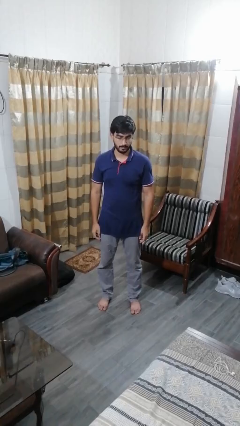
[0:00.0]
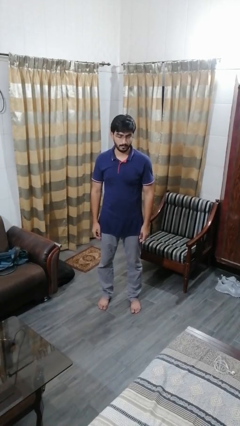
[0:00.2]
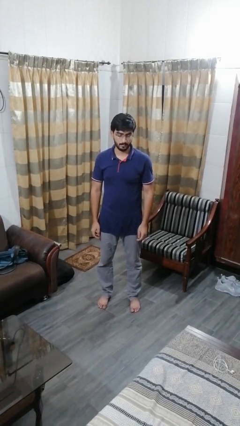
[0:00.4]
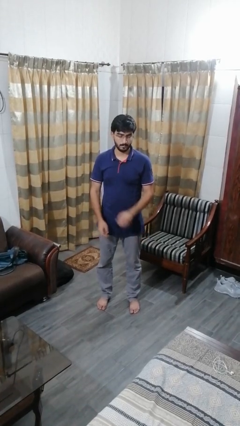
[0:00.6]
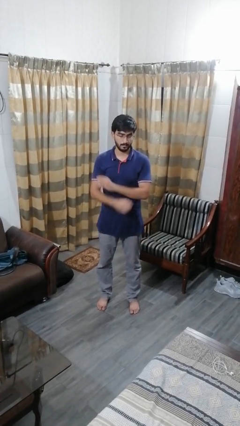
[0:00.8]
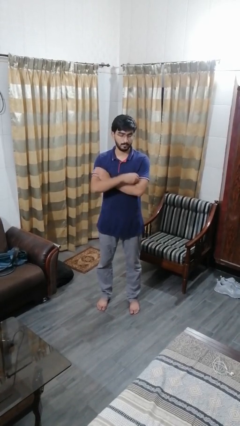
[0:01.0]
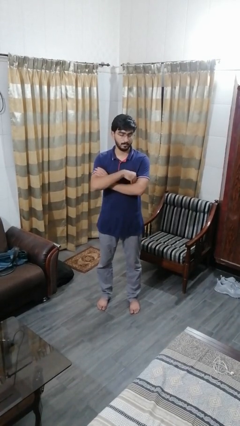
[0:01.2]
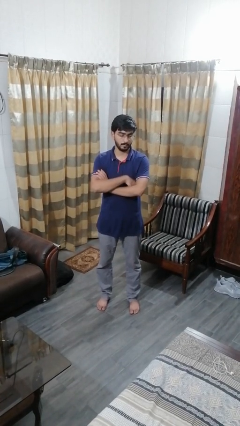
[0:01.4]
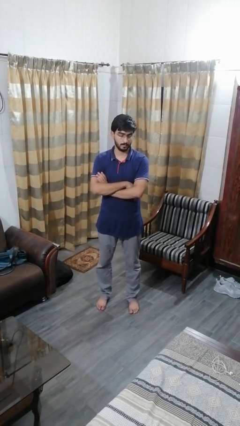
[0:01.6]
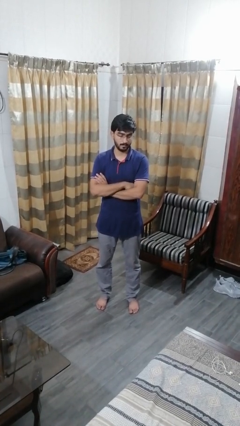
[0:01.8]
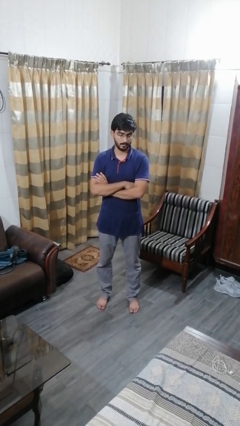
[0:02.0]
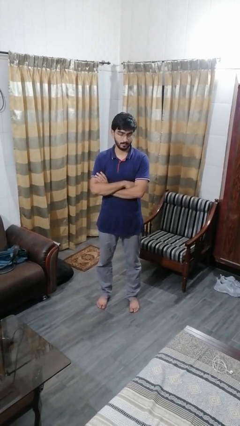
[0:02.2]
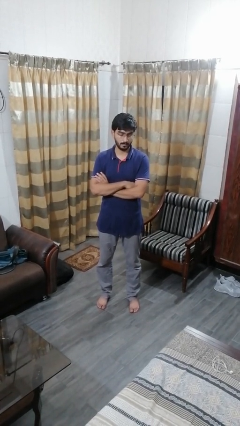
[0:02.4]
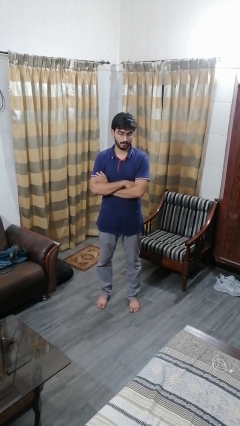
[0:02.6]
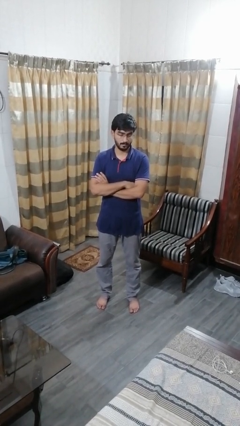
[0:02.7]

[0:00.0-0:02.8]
person crosses arms

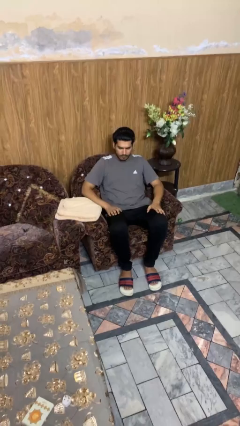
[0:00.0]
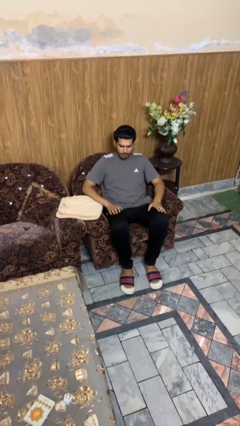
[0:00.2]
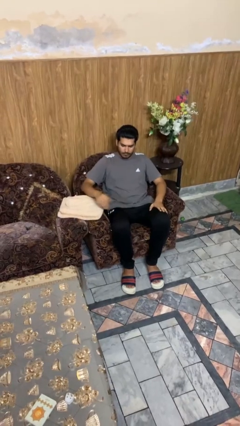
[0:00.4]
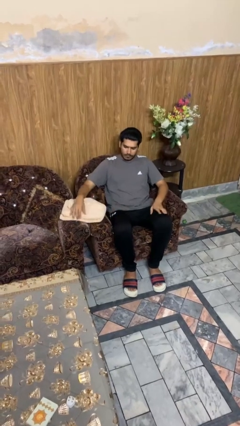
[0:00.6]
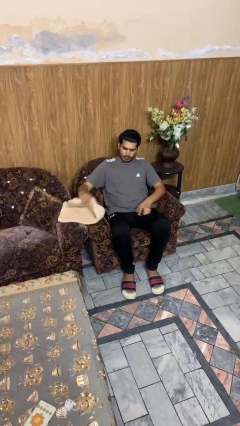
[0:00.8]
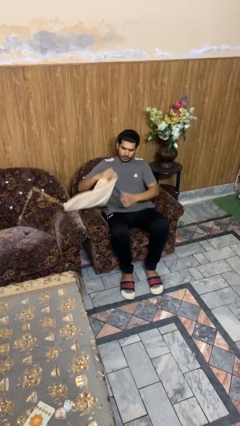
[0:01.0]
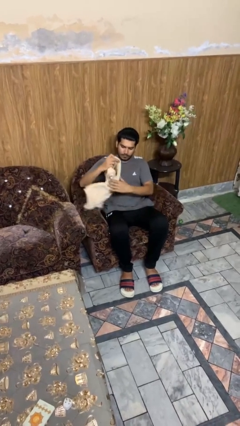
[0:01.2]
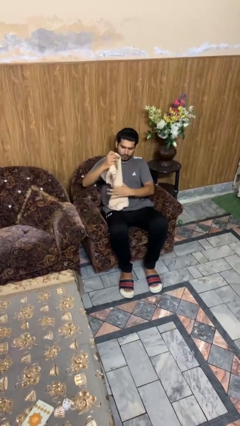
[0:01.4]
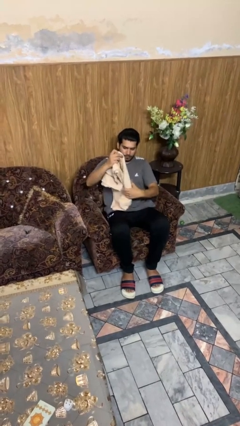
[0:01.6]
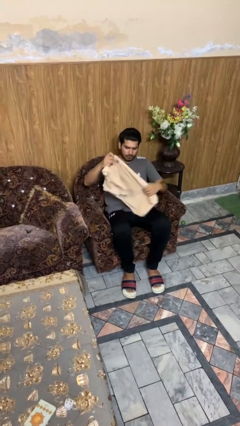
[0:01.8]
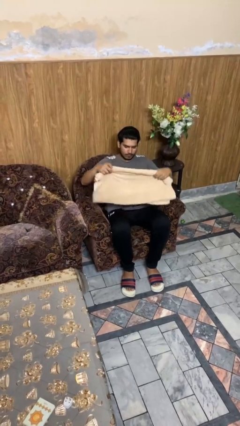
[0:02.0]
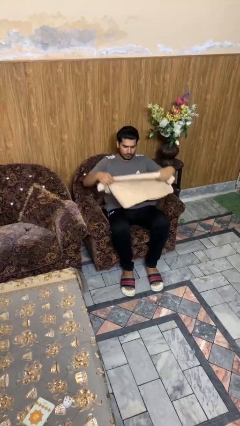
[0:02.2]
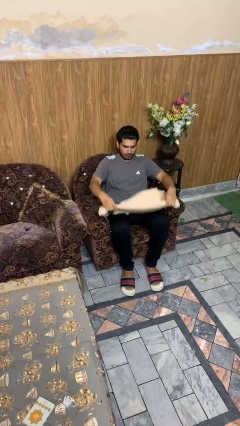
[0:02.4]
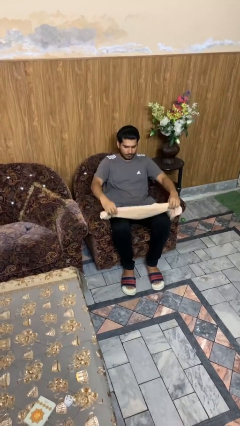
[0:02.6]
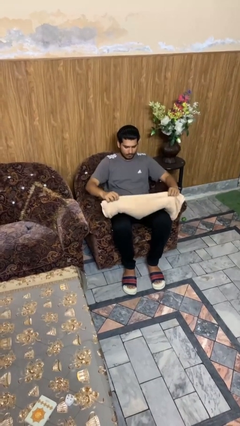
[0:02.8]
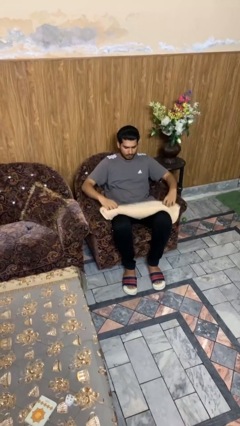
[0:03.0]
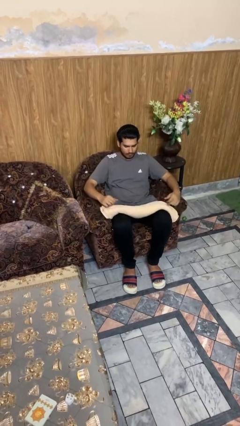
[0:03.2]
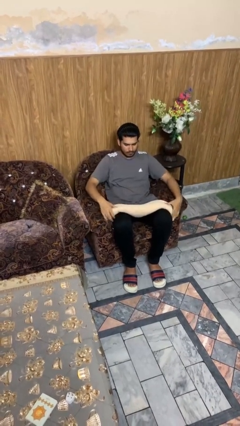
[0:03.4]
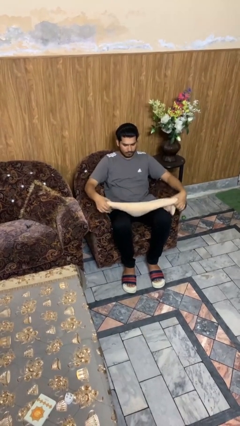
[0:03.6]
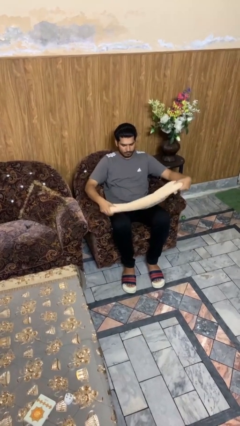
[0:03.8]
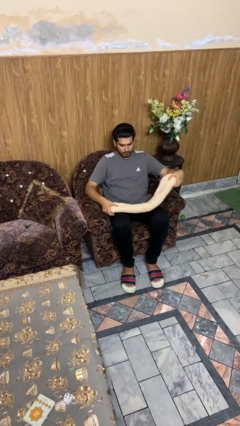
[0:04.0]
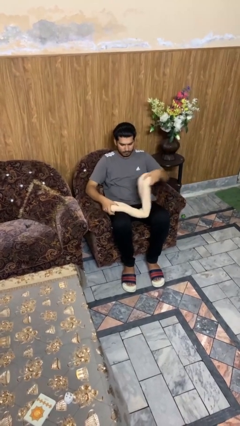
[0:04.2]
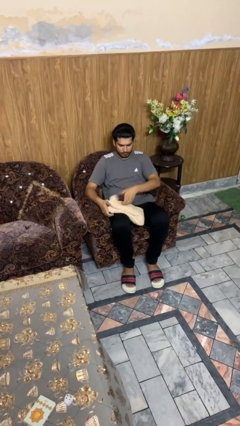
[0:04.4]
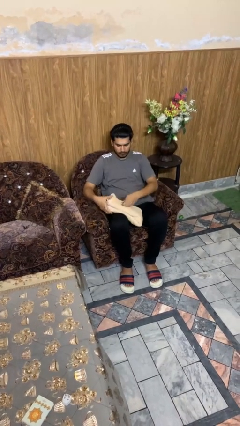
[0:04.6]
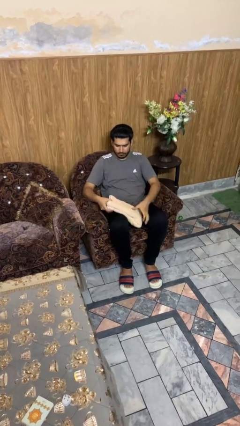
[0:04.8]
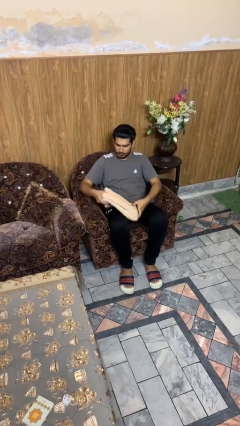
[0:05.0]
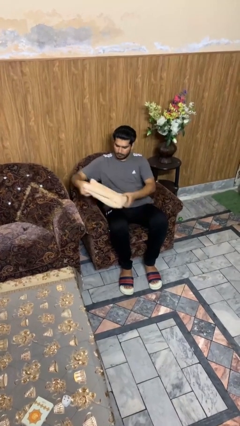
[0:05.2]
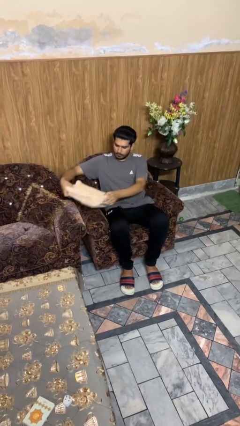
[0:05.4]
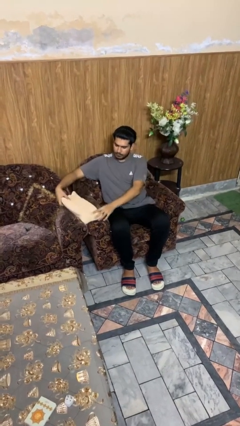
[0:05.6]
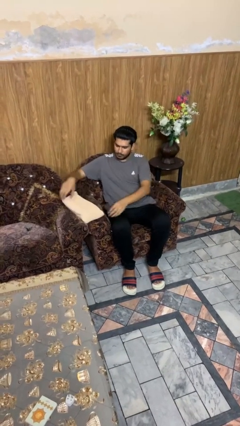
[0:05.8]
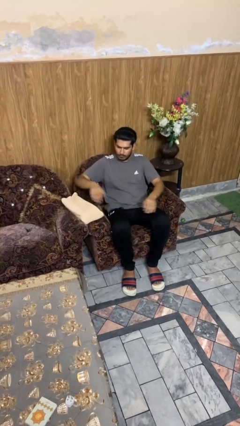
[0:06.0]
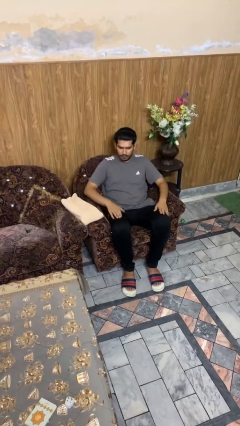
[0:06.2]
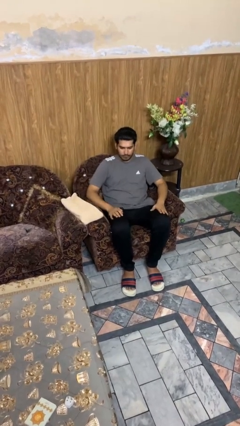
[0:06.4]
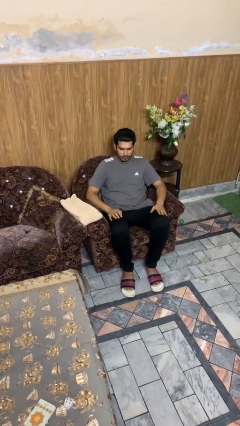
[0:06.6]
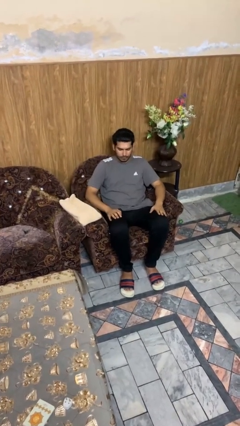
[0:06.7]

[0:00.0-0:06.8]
person folds towel

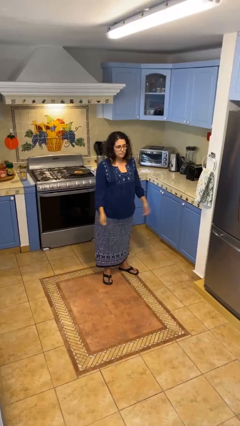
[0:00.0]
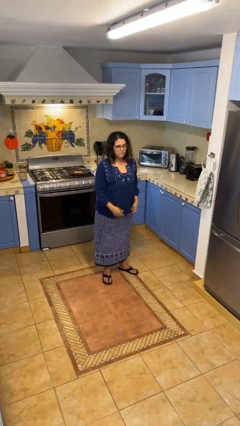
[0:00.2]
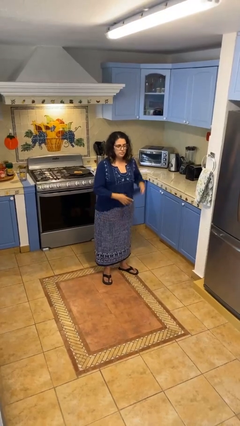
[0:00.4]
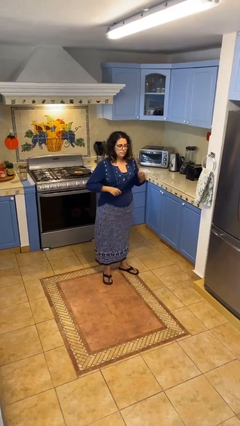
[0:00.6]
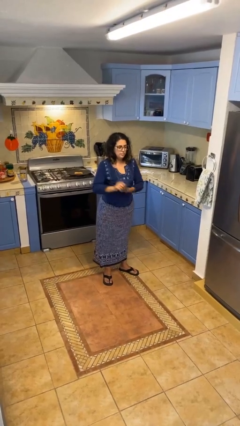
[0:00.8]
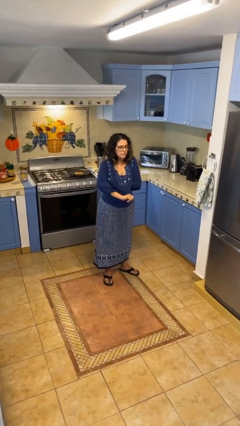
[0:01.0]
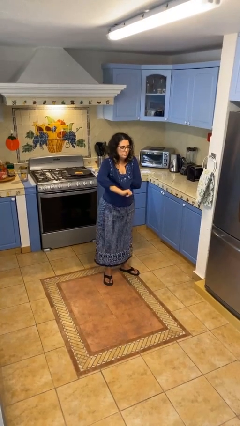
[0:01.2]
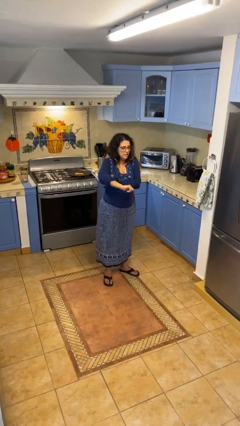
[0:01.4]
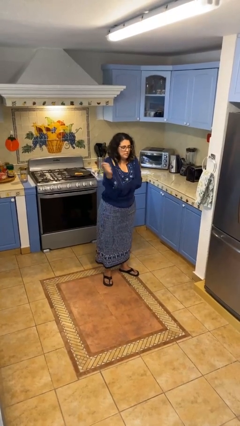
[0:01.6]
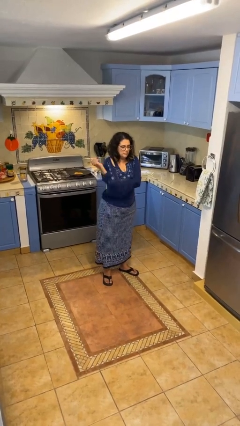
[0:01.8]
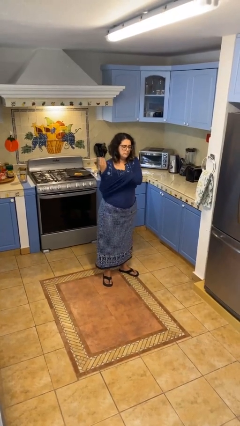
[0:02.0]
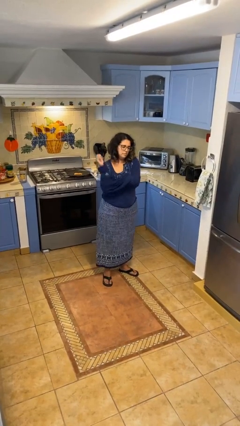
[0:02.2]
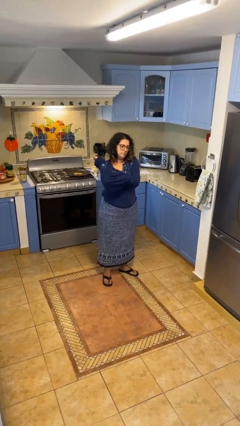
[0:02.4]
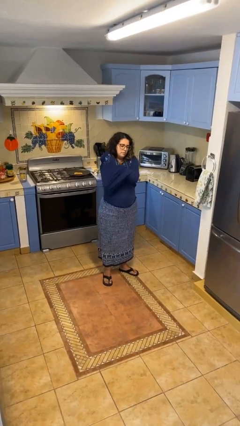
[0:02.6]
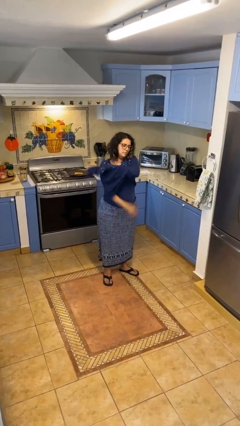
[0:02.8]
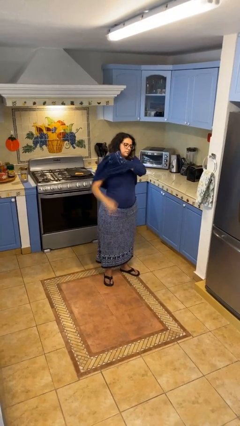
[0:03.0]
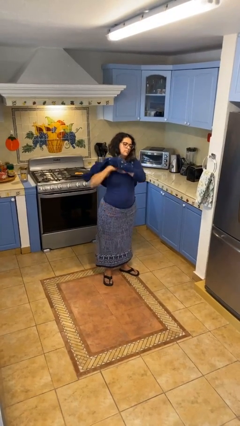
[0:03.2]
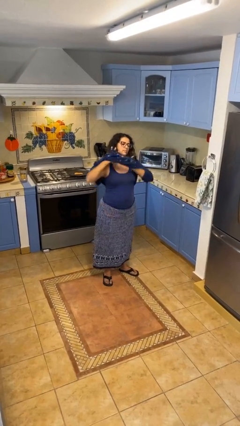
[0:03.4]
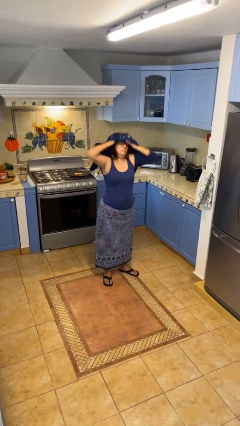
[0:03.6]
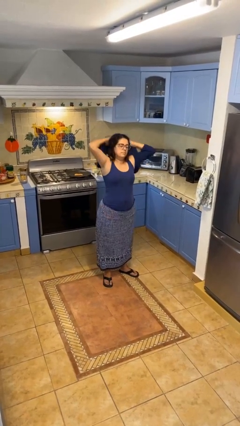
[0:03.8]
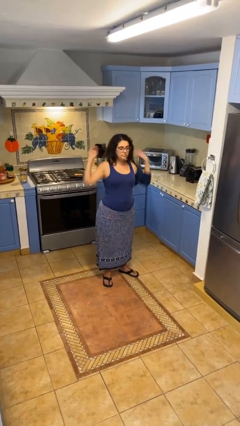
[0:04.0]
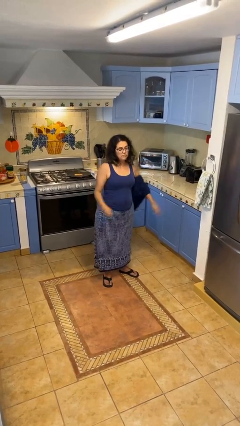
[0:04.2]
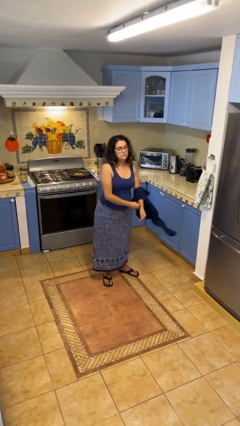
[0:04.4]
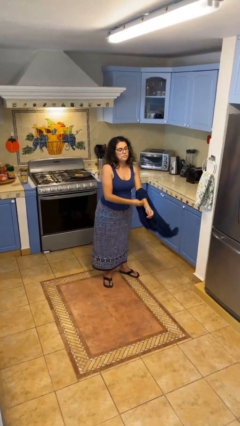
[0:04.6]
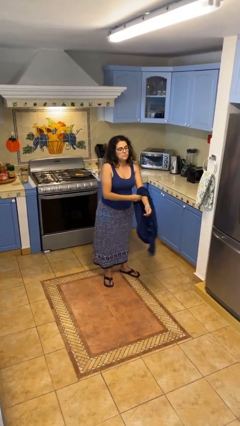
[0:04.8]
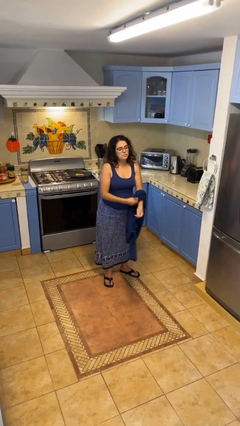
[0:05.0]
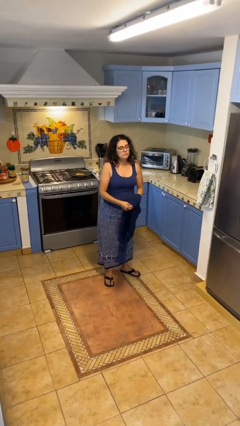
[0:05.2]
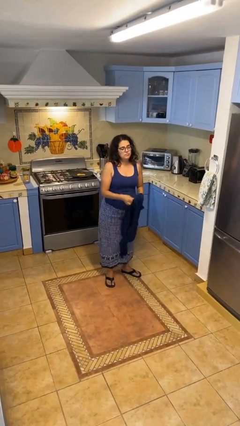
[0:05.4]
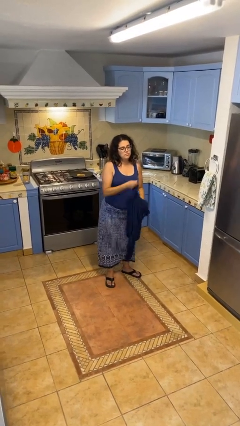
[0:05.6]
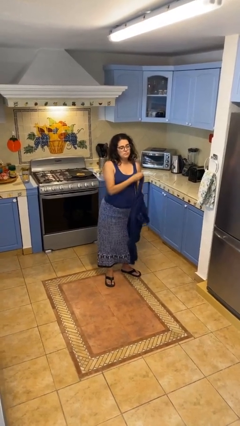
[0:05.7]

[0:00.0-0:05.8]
person takes off shirt

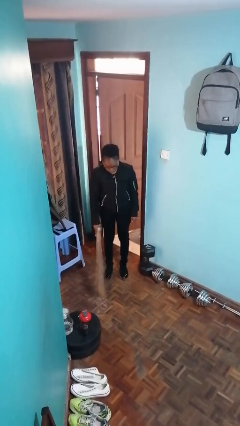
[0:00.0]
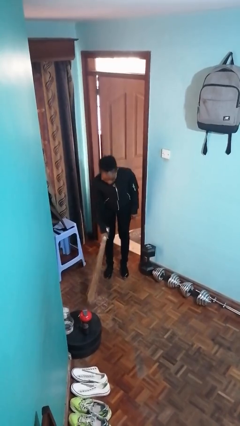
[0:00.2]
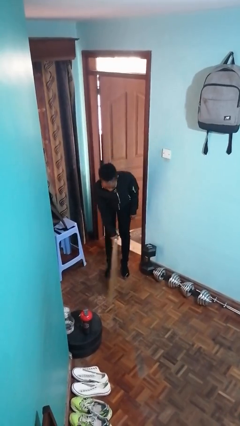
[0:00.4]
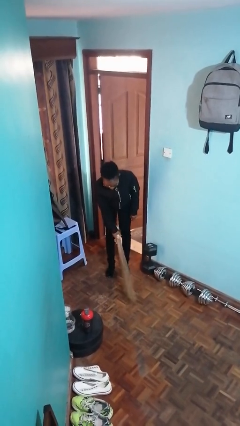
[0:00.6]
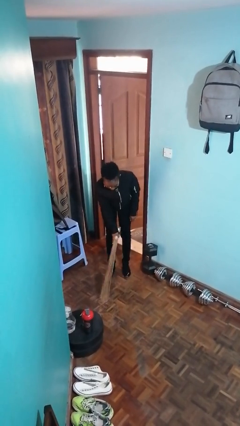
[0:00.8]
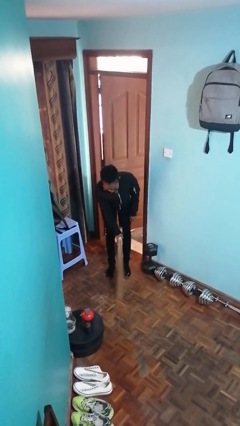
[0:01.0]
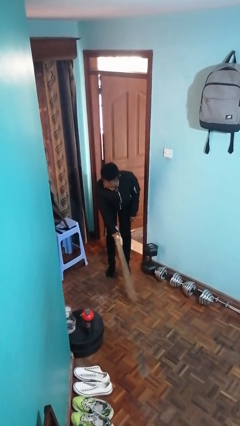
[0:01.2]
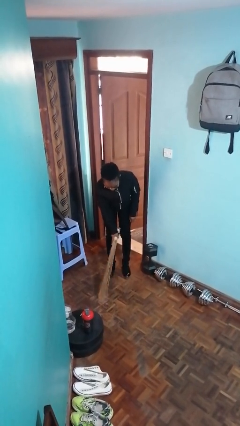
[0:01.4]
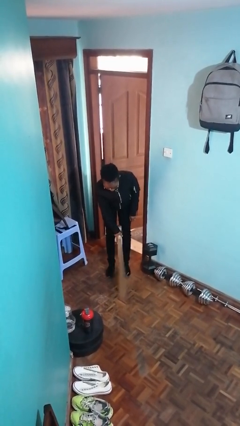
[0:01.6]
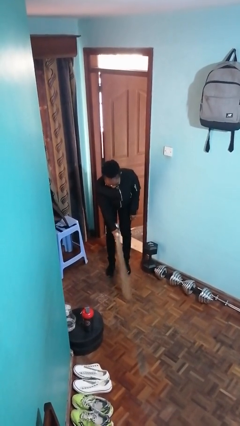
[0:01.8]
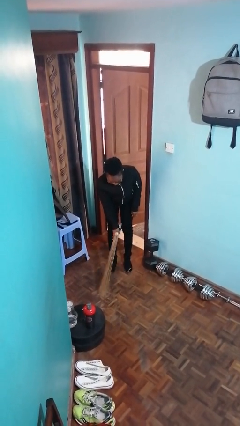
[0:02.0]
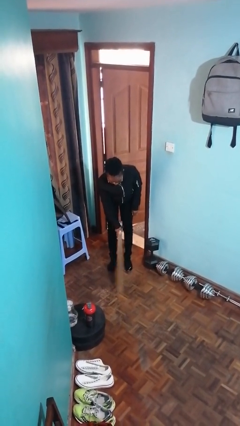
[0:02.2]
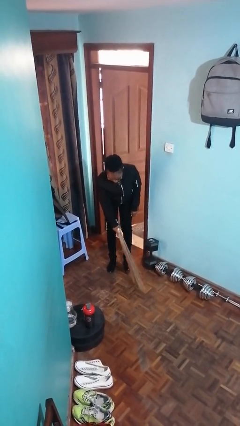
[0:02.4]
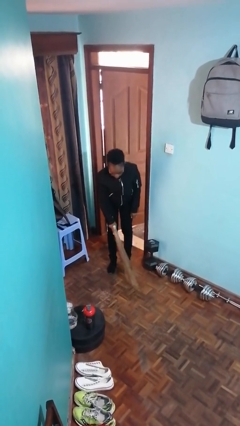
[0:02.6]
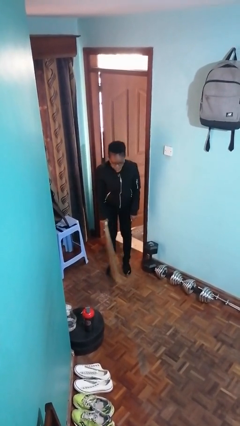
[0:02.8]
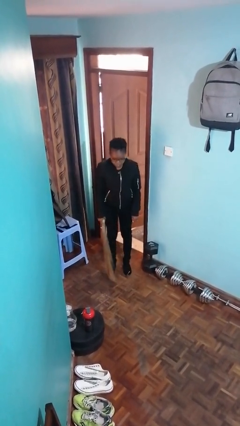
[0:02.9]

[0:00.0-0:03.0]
person sweeps floor
